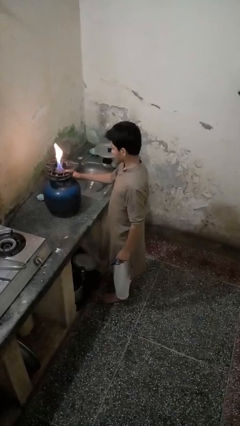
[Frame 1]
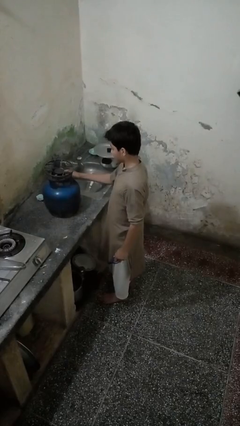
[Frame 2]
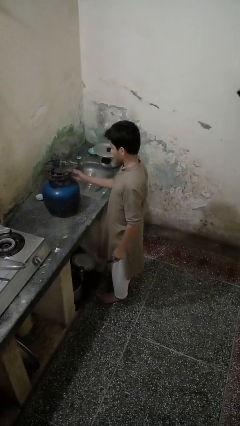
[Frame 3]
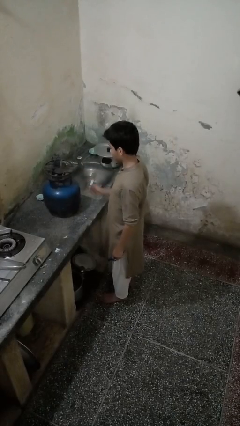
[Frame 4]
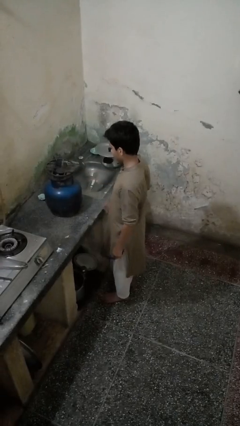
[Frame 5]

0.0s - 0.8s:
person turns off stovetop

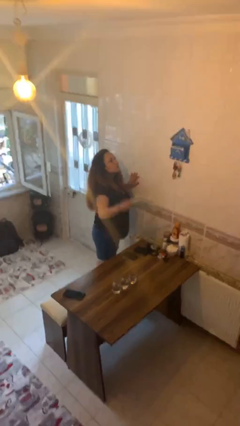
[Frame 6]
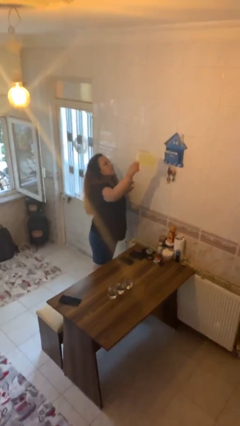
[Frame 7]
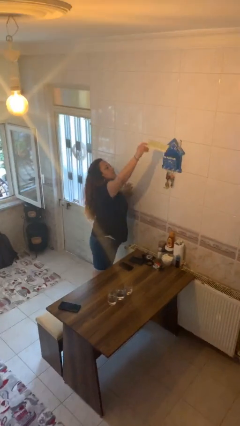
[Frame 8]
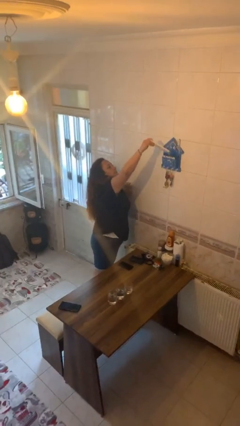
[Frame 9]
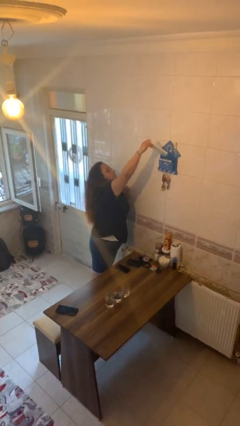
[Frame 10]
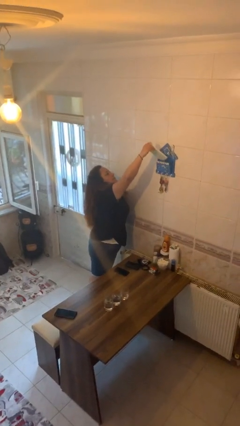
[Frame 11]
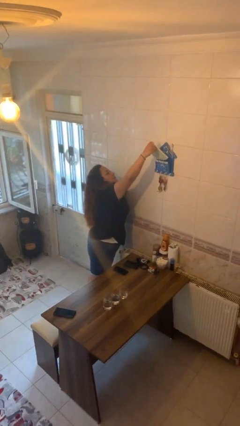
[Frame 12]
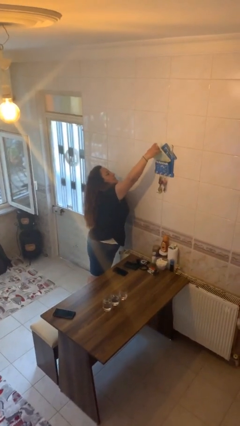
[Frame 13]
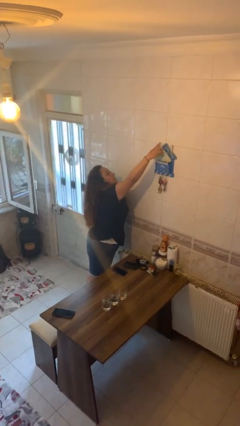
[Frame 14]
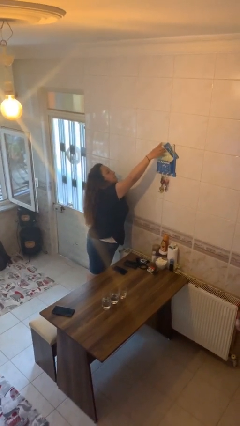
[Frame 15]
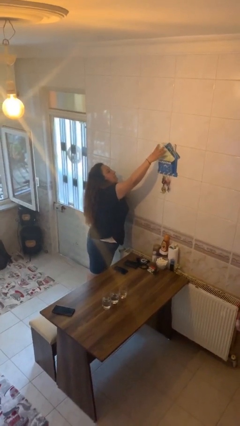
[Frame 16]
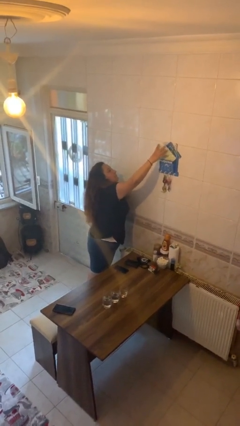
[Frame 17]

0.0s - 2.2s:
person puts down object on shelf

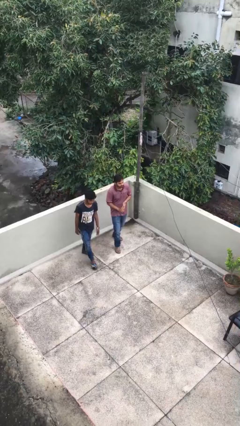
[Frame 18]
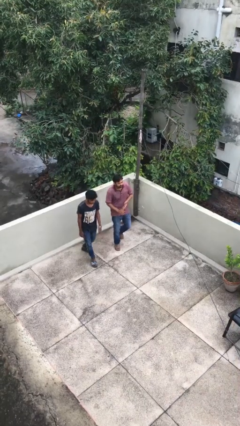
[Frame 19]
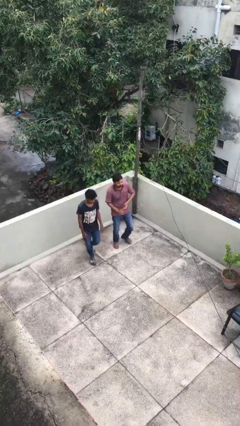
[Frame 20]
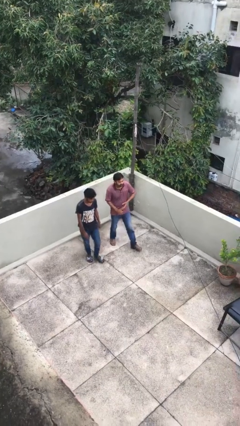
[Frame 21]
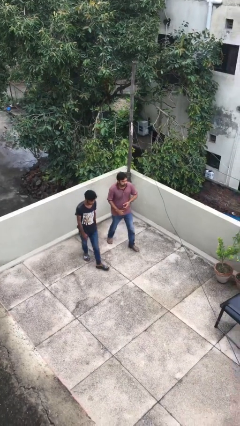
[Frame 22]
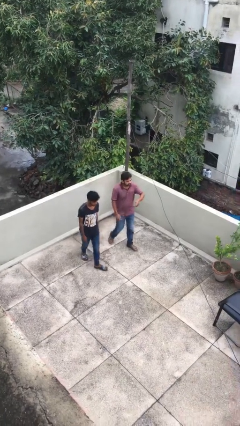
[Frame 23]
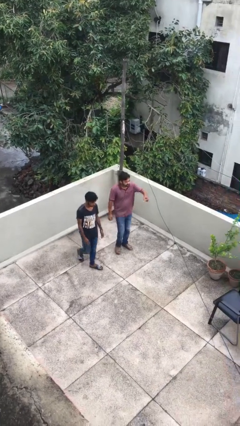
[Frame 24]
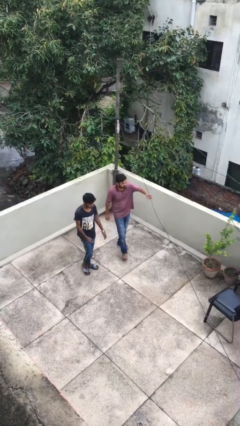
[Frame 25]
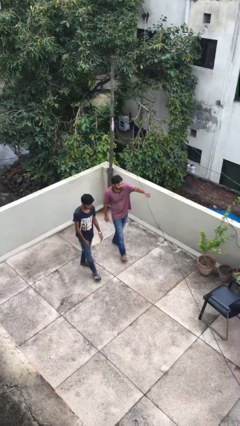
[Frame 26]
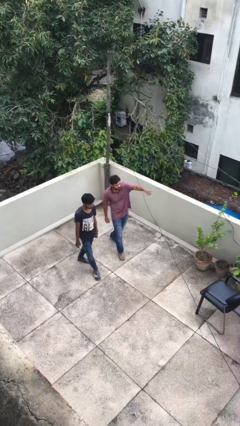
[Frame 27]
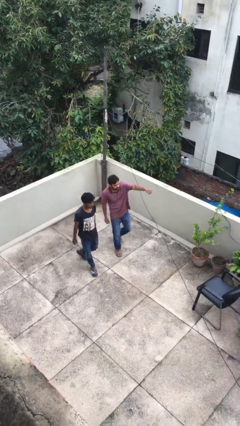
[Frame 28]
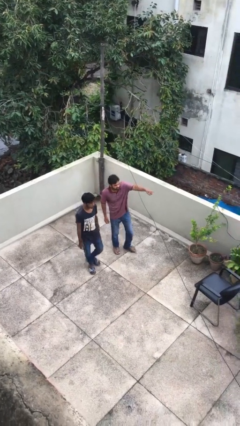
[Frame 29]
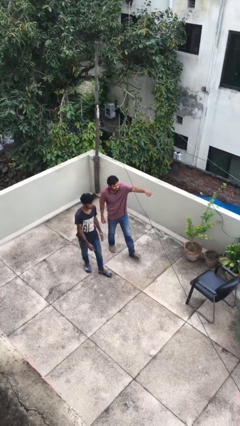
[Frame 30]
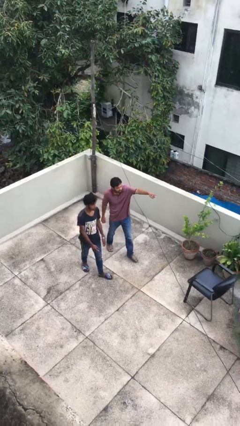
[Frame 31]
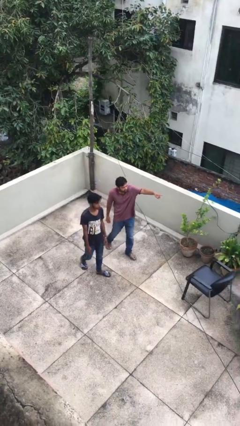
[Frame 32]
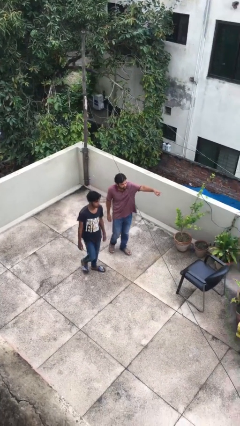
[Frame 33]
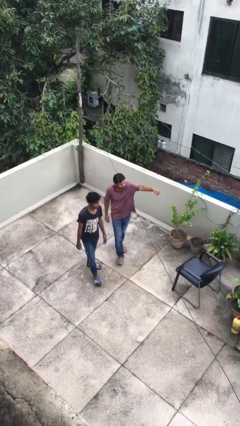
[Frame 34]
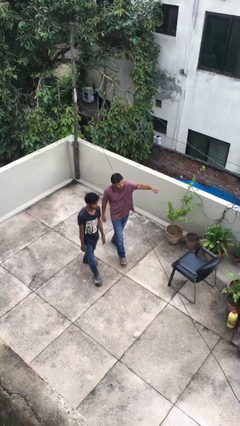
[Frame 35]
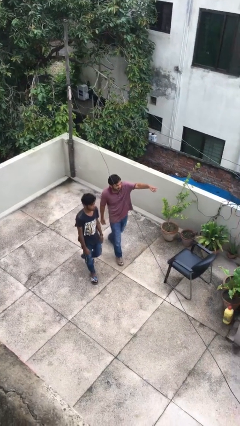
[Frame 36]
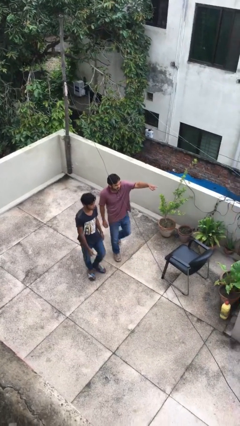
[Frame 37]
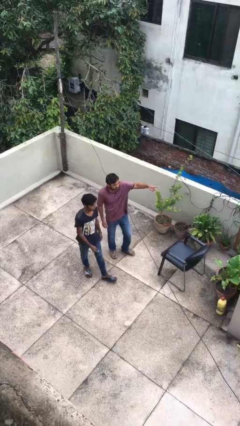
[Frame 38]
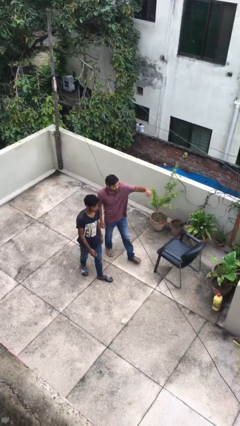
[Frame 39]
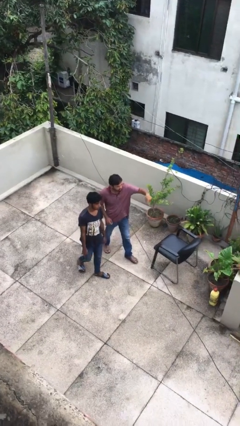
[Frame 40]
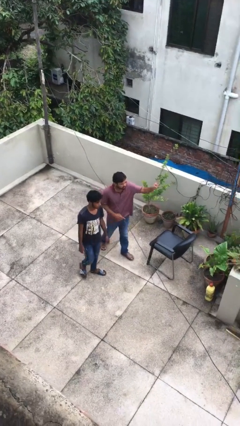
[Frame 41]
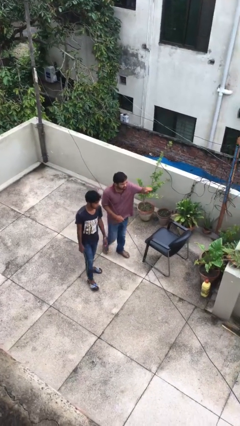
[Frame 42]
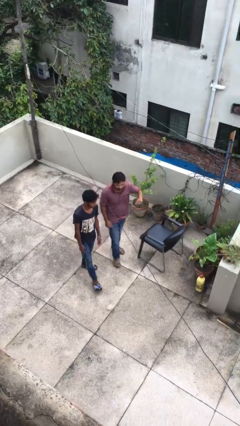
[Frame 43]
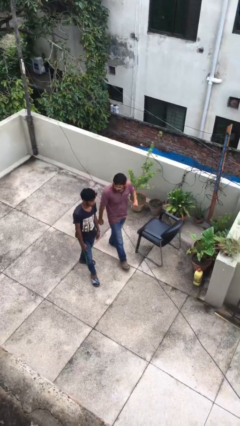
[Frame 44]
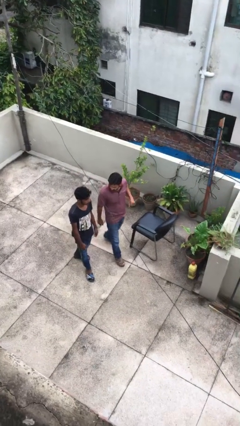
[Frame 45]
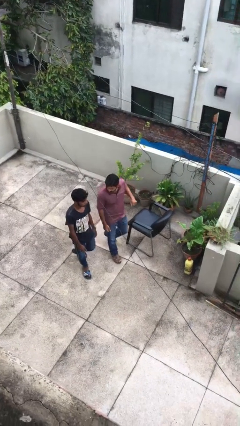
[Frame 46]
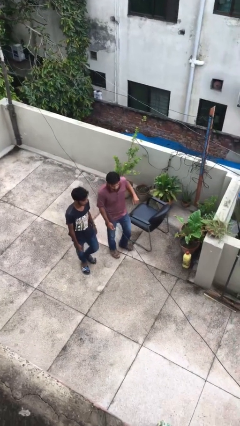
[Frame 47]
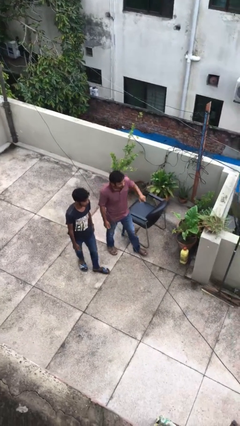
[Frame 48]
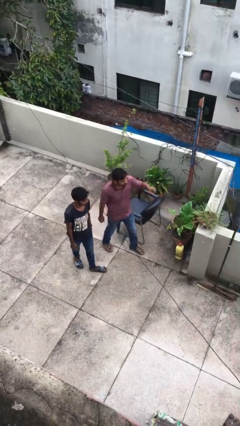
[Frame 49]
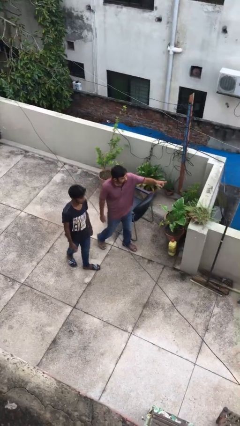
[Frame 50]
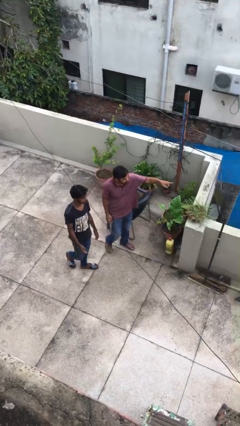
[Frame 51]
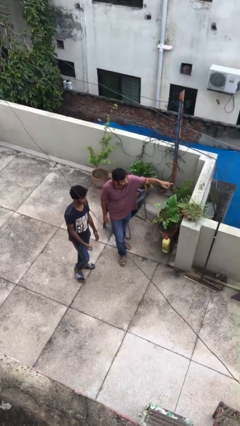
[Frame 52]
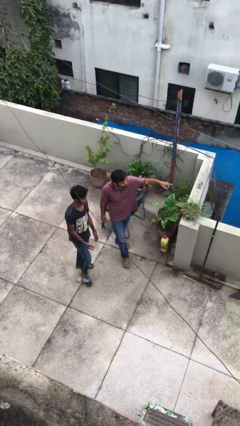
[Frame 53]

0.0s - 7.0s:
person talks to person

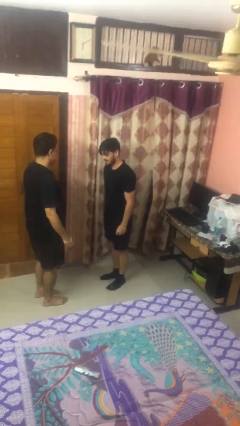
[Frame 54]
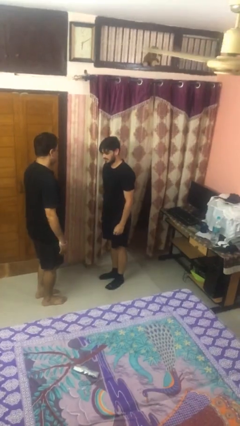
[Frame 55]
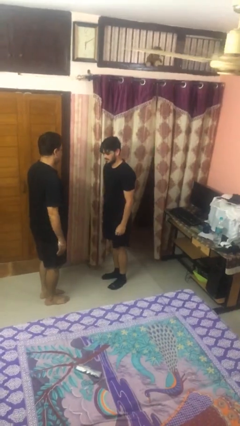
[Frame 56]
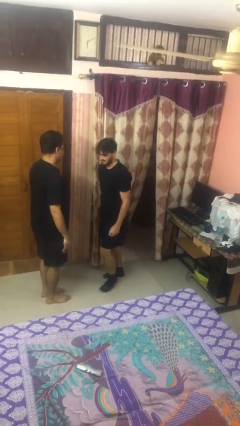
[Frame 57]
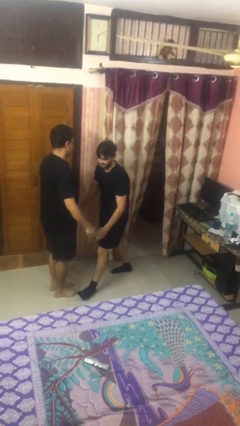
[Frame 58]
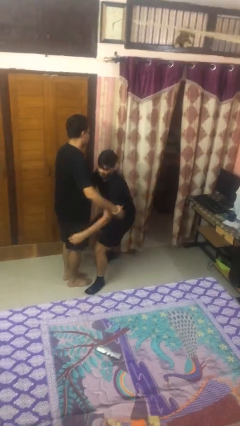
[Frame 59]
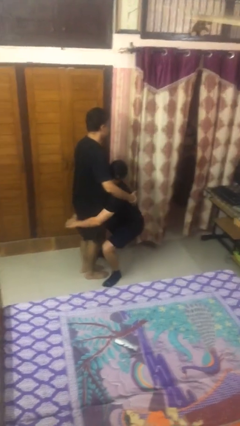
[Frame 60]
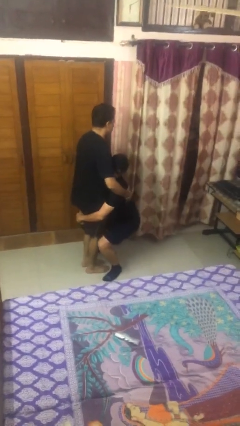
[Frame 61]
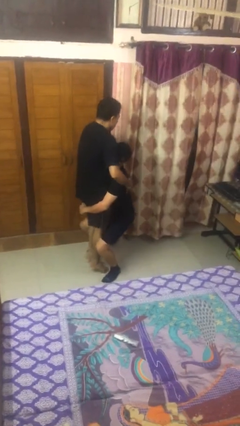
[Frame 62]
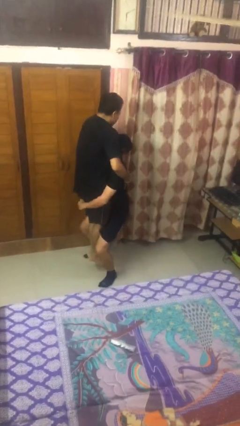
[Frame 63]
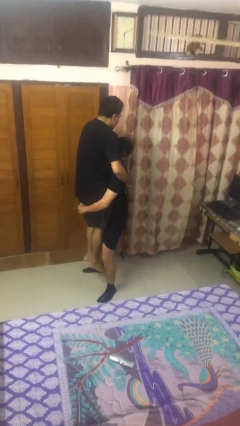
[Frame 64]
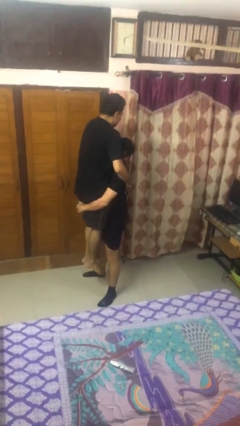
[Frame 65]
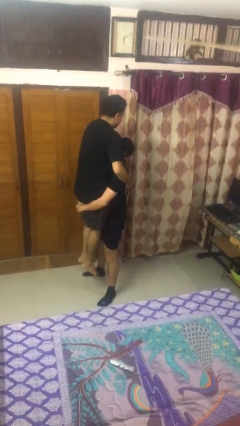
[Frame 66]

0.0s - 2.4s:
person picks up person

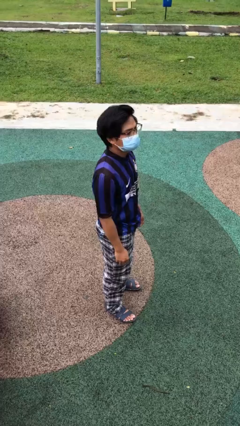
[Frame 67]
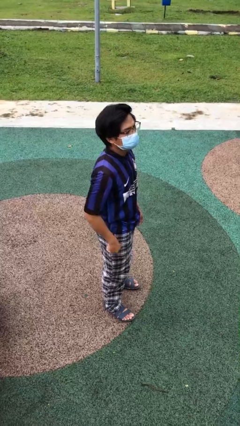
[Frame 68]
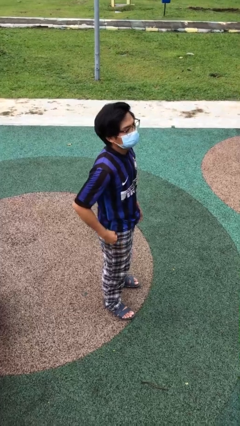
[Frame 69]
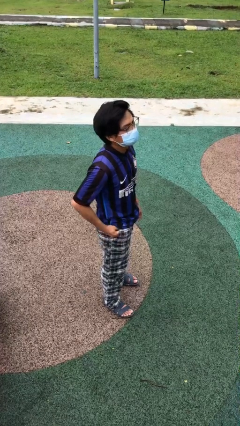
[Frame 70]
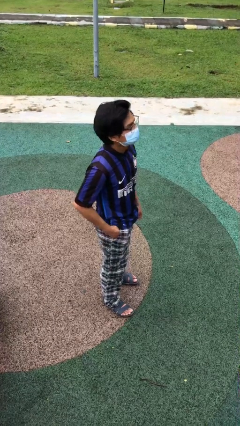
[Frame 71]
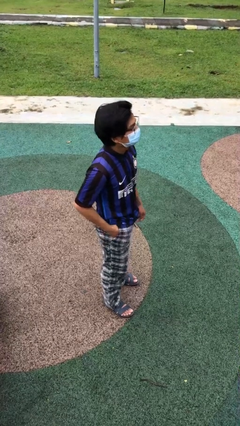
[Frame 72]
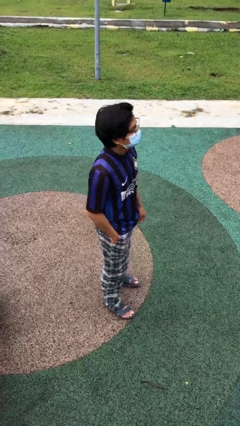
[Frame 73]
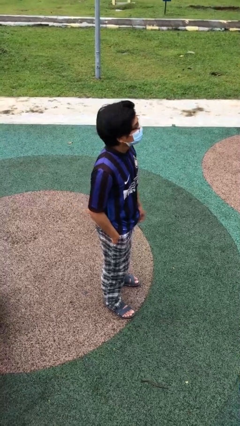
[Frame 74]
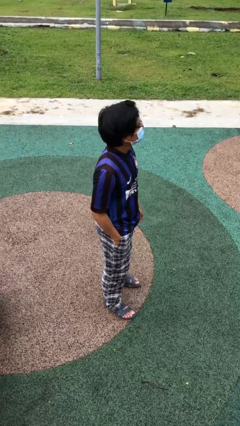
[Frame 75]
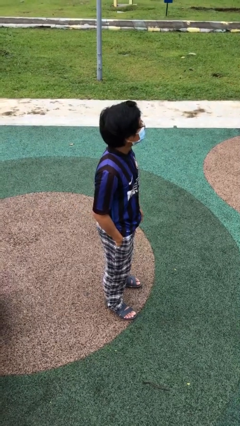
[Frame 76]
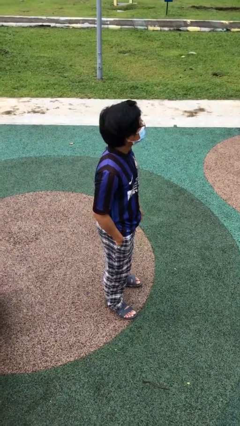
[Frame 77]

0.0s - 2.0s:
person puts hands in back pockets

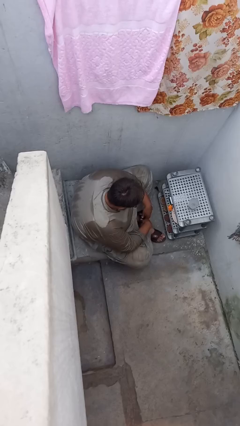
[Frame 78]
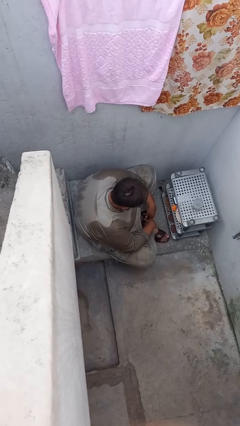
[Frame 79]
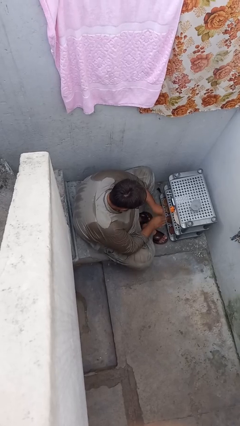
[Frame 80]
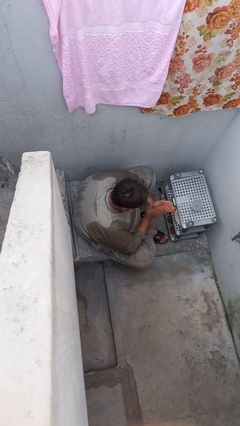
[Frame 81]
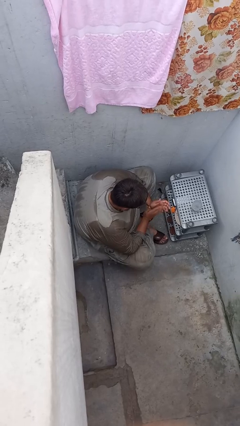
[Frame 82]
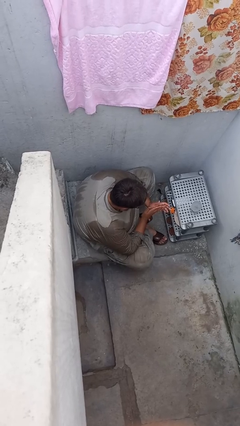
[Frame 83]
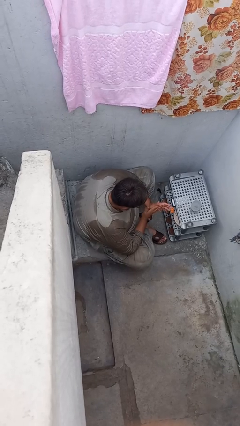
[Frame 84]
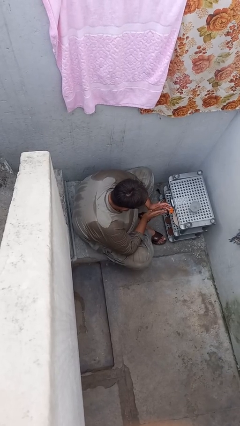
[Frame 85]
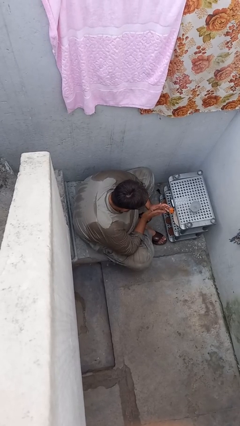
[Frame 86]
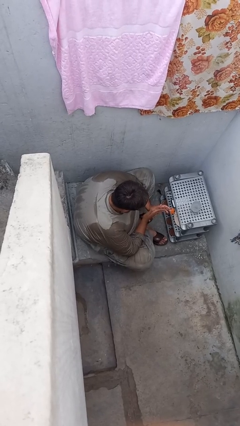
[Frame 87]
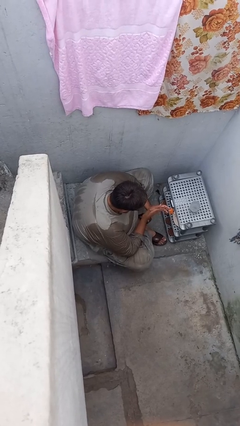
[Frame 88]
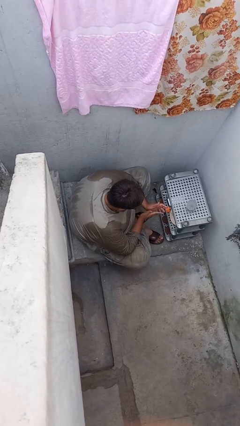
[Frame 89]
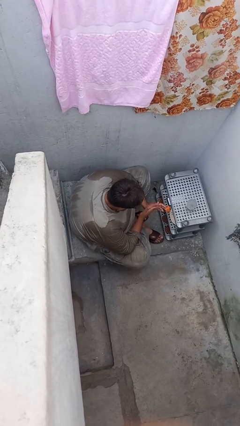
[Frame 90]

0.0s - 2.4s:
person claps hands

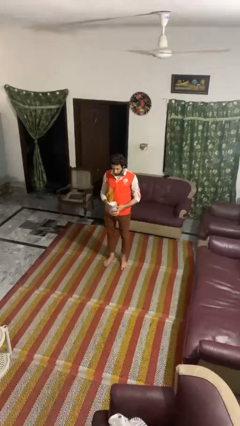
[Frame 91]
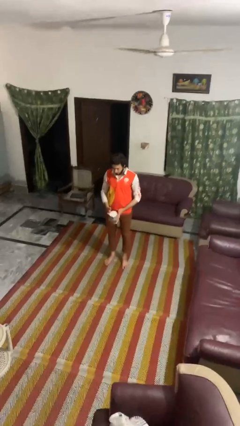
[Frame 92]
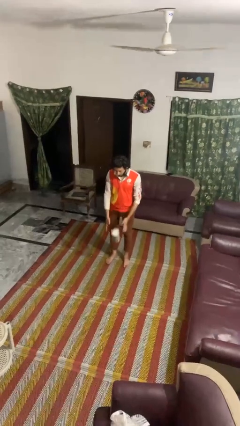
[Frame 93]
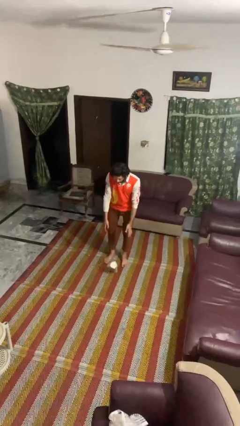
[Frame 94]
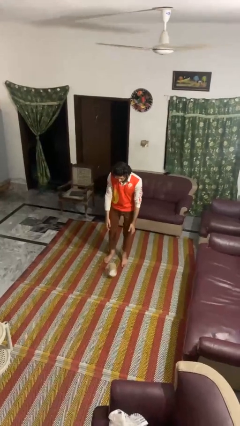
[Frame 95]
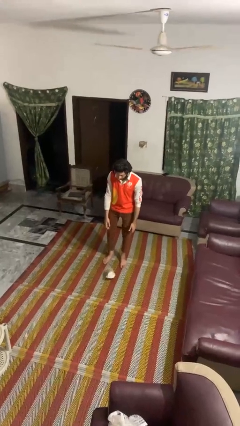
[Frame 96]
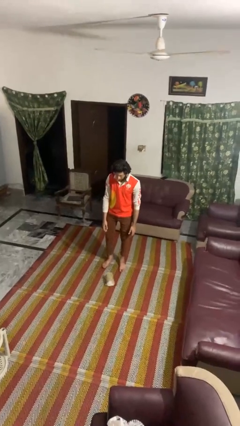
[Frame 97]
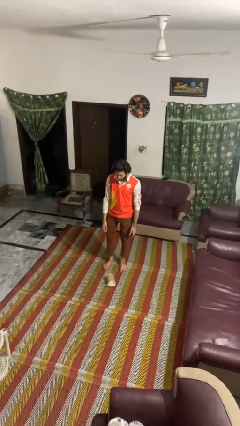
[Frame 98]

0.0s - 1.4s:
person drops object
